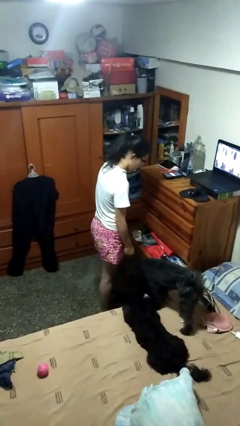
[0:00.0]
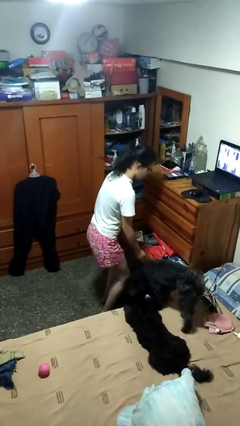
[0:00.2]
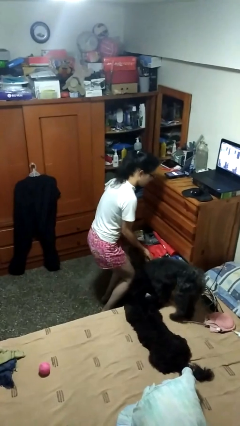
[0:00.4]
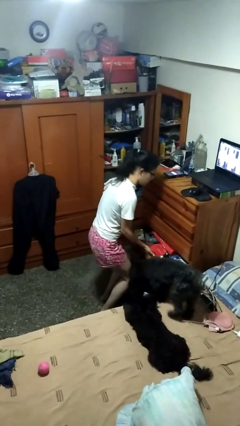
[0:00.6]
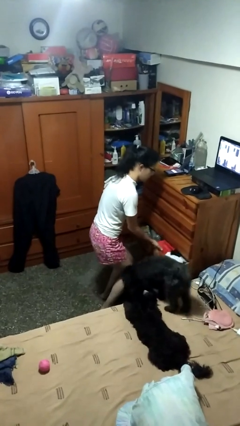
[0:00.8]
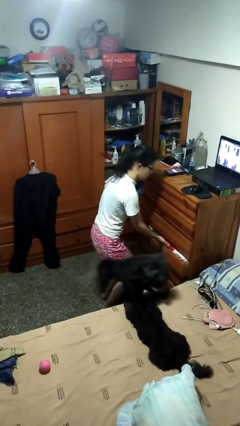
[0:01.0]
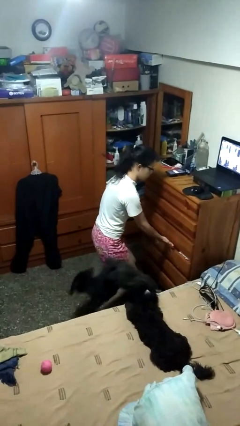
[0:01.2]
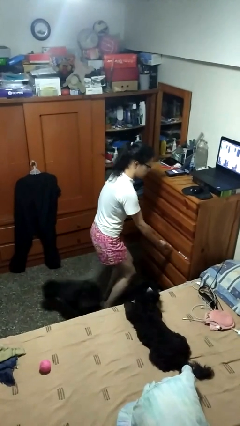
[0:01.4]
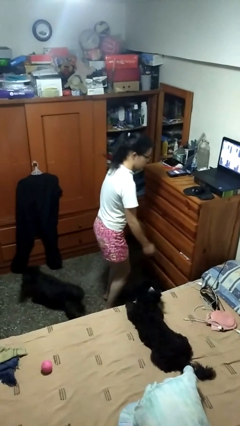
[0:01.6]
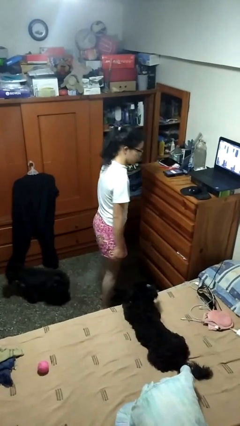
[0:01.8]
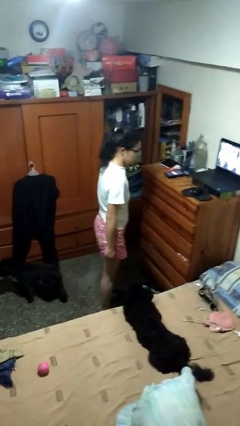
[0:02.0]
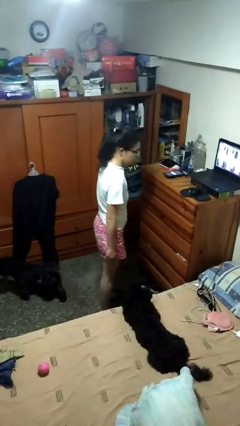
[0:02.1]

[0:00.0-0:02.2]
person closes dresser drawer

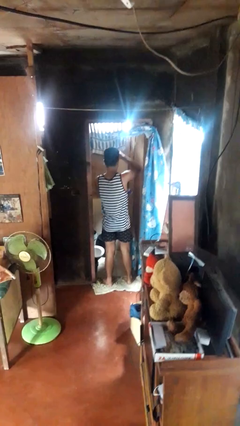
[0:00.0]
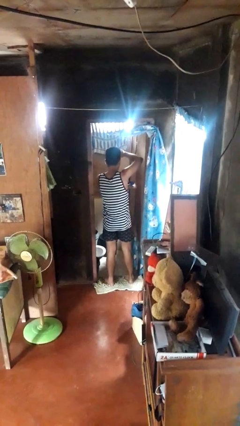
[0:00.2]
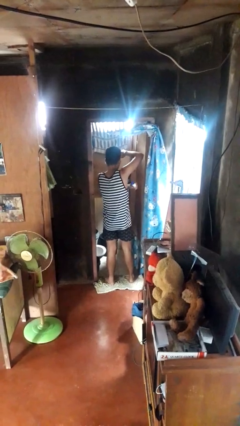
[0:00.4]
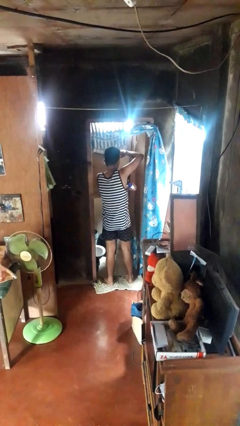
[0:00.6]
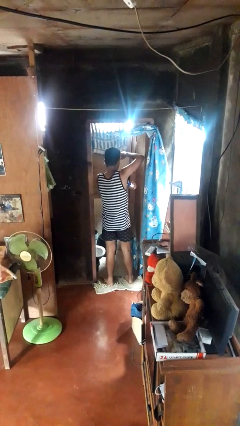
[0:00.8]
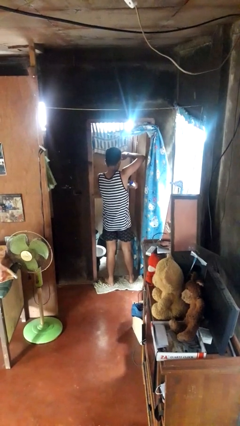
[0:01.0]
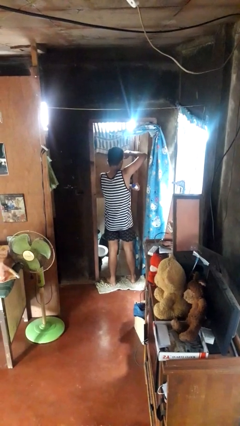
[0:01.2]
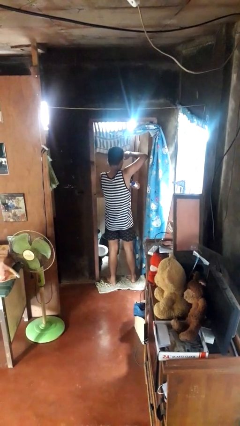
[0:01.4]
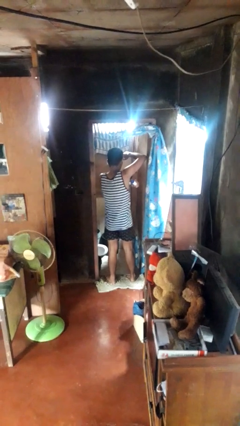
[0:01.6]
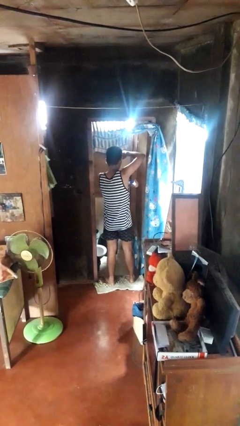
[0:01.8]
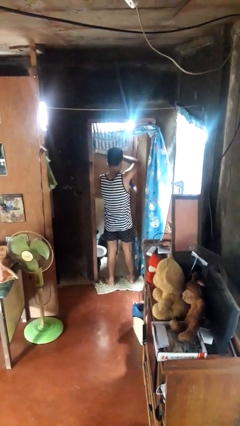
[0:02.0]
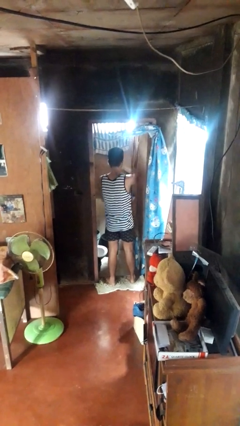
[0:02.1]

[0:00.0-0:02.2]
person applies deodorant

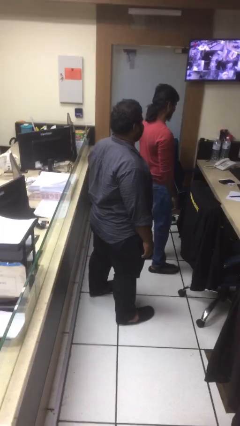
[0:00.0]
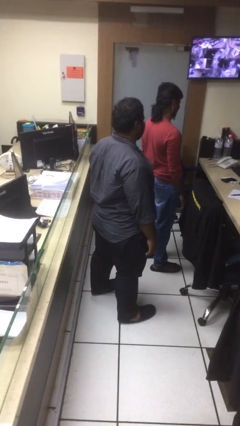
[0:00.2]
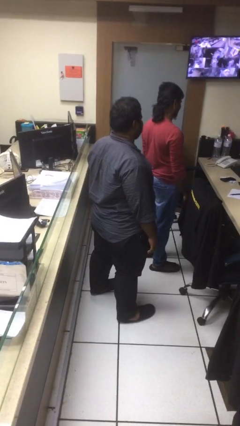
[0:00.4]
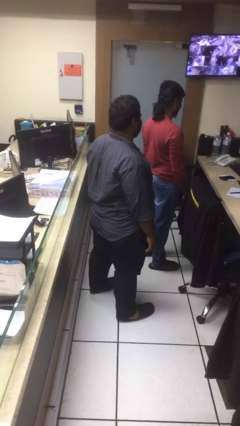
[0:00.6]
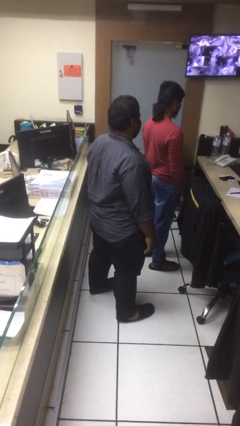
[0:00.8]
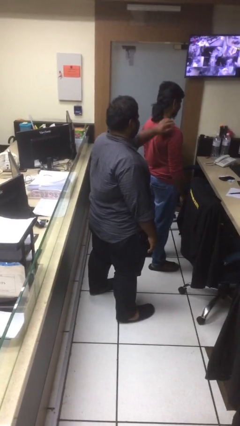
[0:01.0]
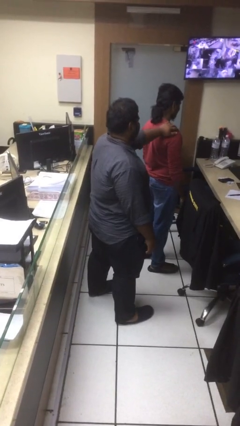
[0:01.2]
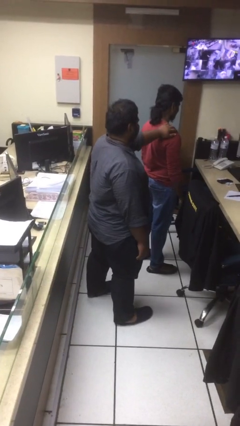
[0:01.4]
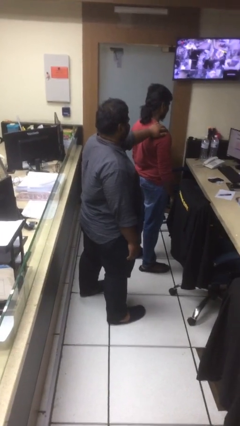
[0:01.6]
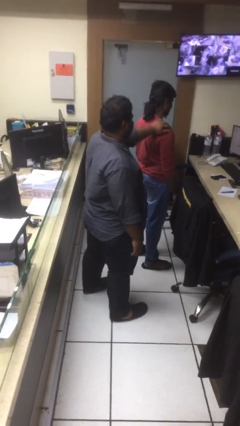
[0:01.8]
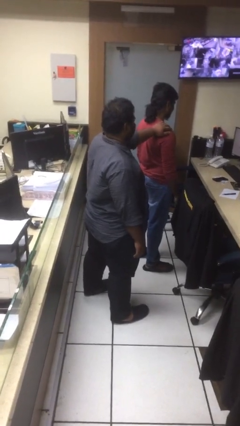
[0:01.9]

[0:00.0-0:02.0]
person grabs person by shoulder

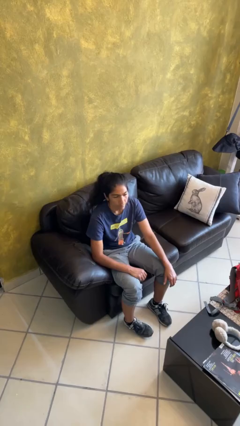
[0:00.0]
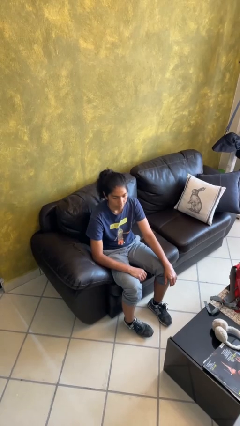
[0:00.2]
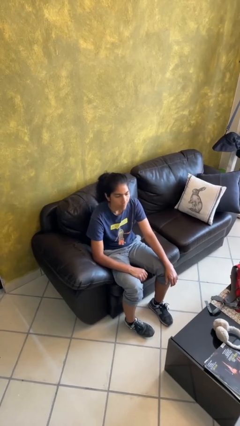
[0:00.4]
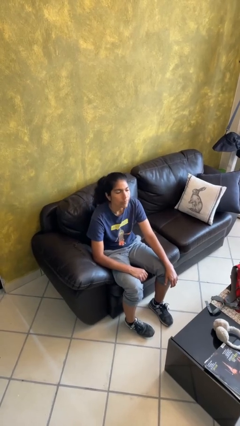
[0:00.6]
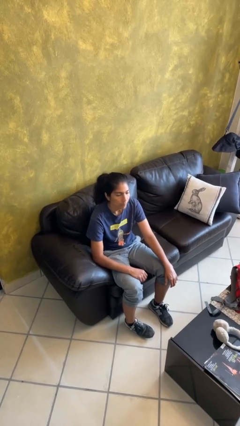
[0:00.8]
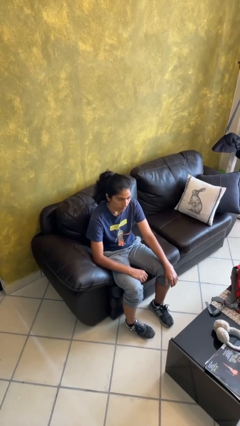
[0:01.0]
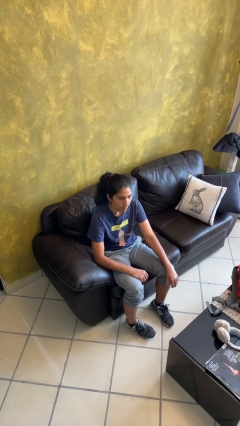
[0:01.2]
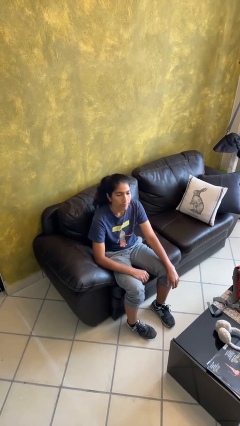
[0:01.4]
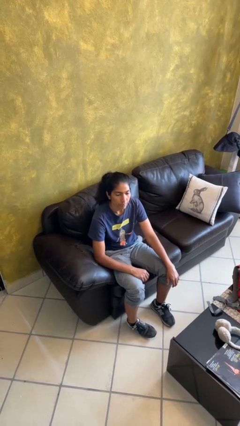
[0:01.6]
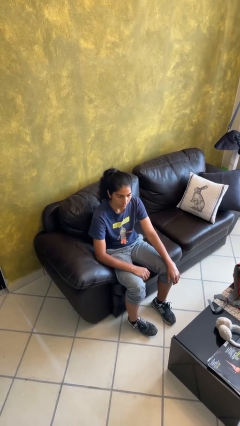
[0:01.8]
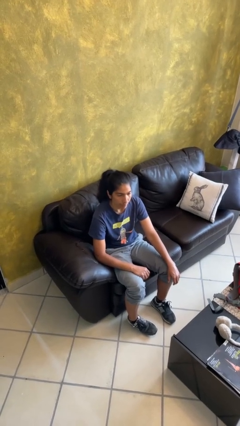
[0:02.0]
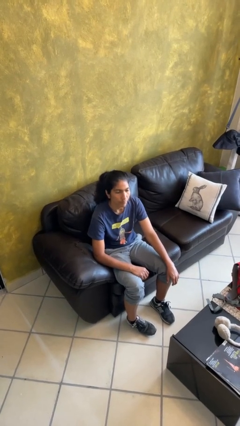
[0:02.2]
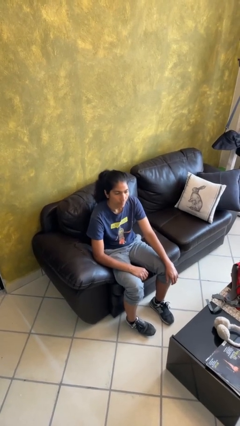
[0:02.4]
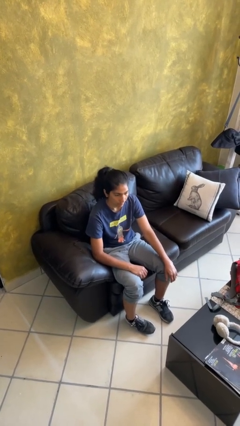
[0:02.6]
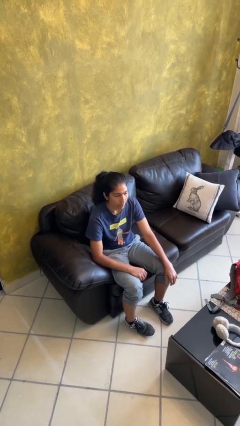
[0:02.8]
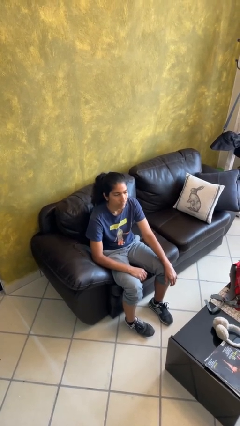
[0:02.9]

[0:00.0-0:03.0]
person nods head

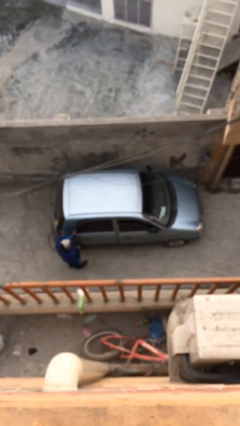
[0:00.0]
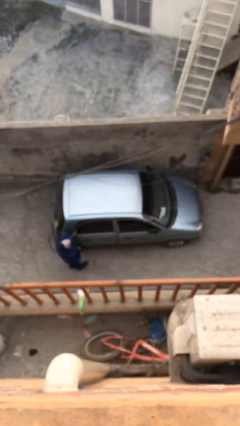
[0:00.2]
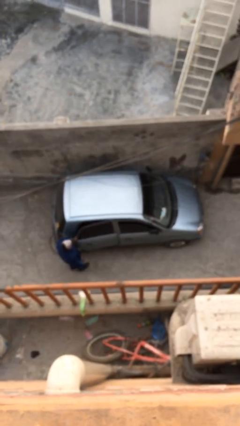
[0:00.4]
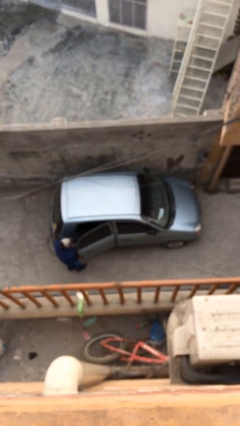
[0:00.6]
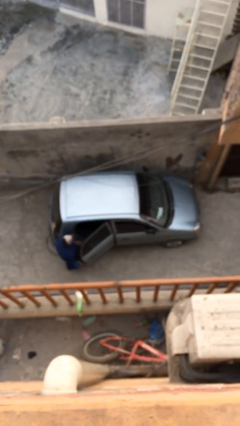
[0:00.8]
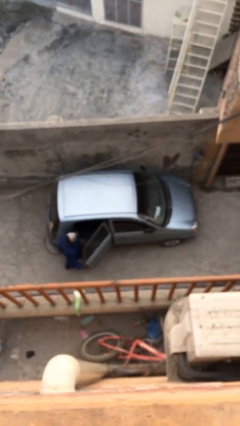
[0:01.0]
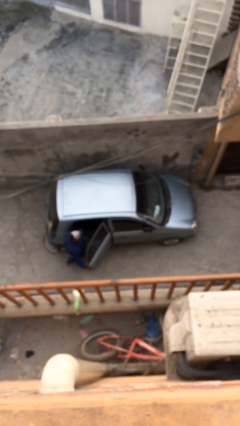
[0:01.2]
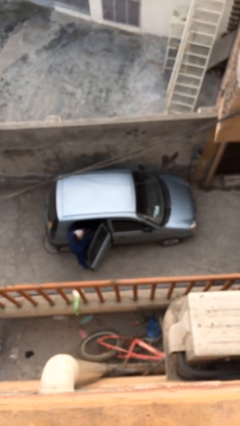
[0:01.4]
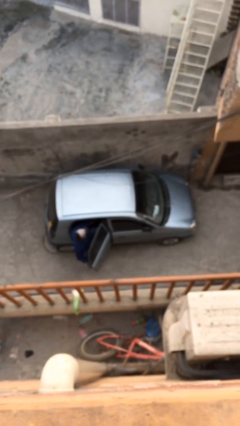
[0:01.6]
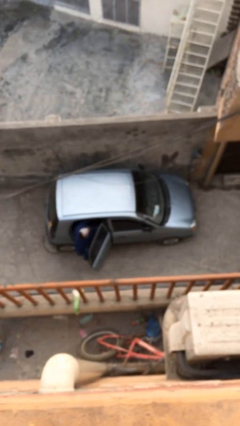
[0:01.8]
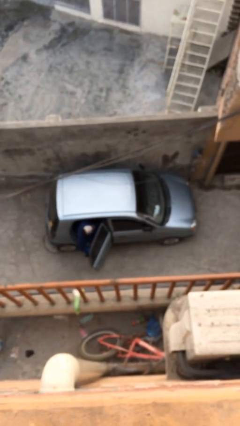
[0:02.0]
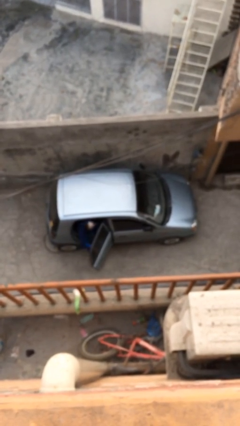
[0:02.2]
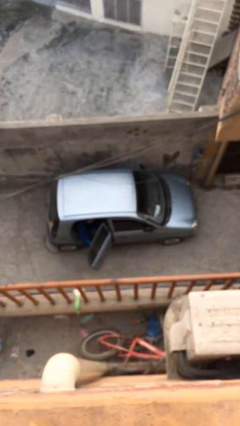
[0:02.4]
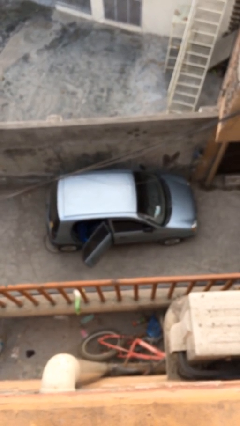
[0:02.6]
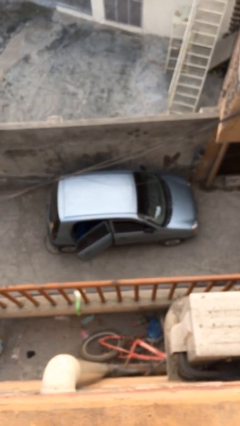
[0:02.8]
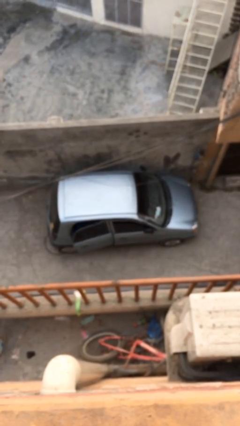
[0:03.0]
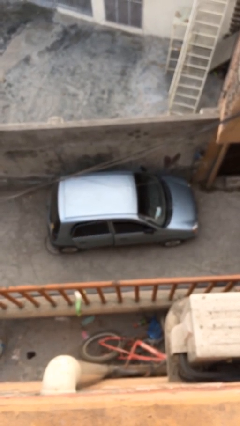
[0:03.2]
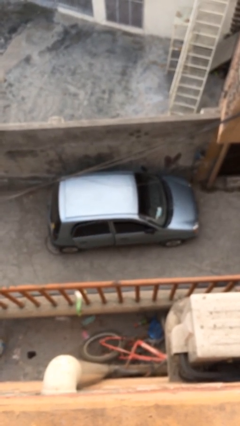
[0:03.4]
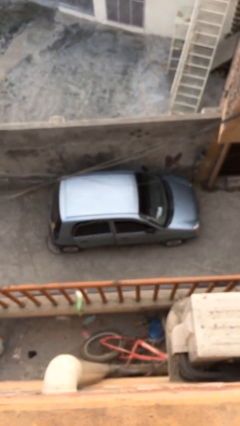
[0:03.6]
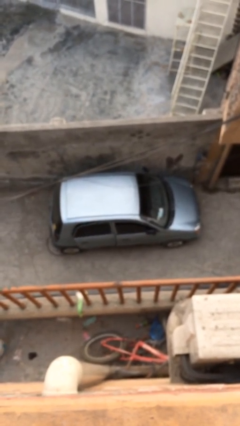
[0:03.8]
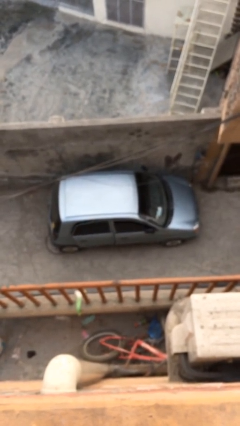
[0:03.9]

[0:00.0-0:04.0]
car picks up person

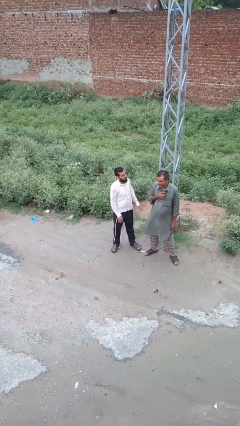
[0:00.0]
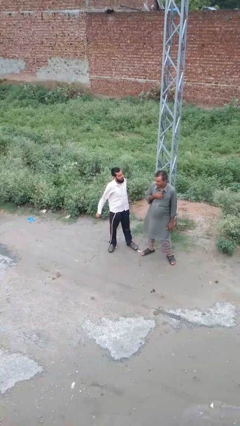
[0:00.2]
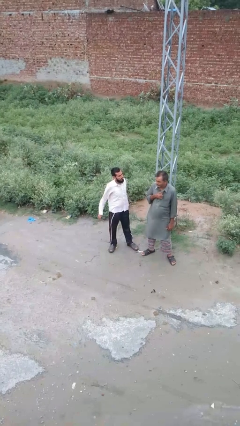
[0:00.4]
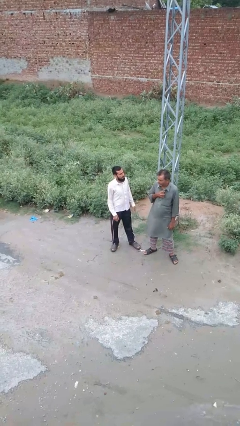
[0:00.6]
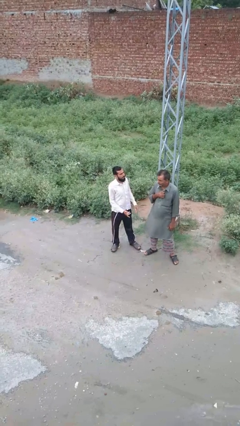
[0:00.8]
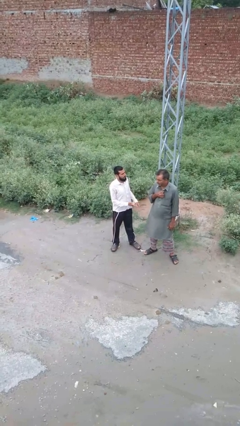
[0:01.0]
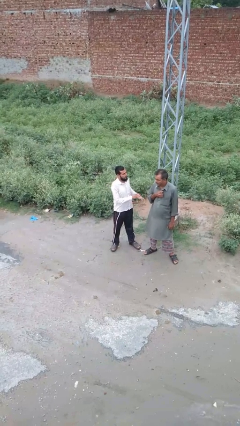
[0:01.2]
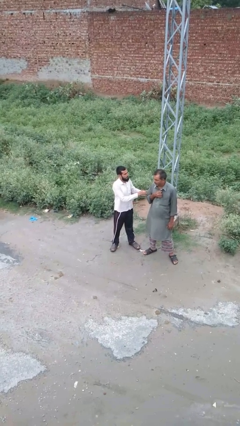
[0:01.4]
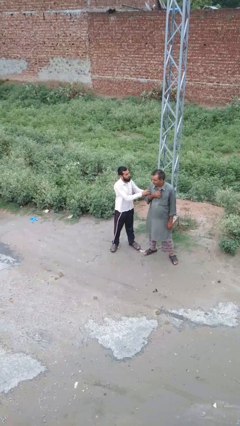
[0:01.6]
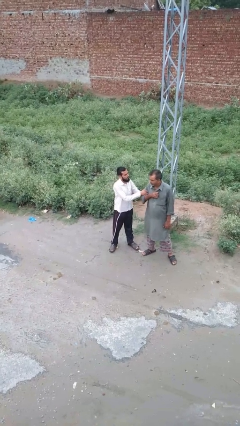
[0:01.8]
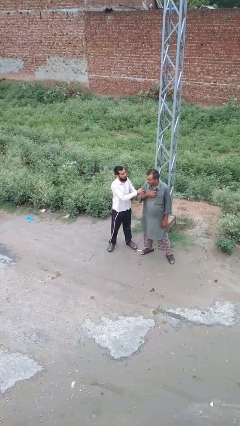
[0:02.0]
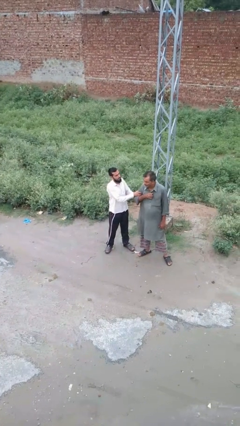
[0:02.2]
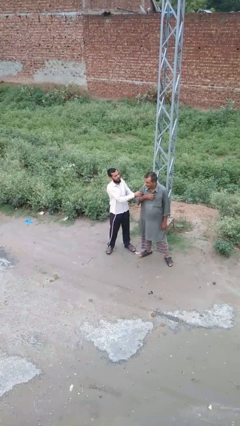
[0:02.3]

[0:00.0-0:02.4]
person grabs person by bicep

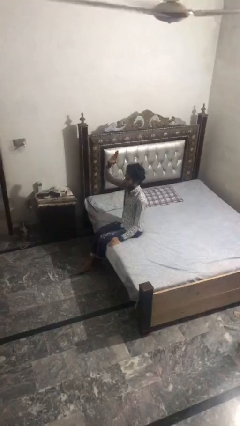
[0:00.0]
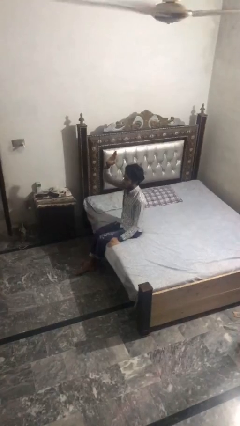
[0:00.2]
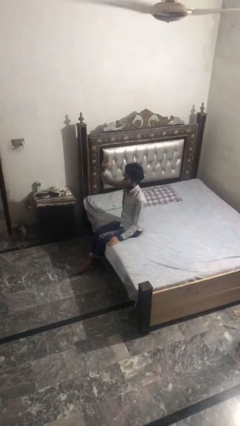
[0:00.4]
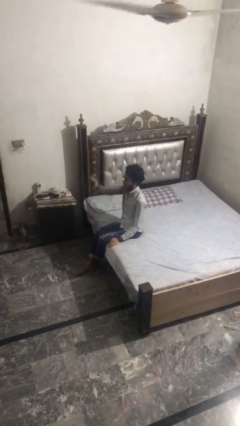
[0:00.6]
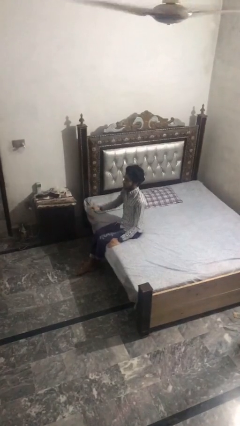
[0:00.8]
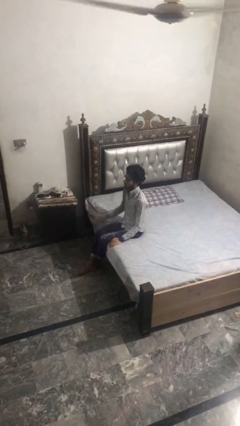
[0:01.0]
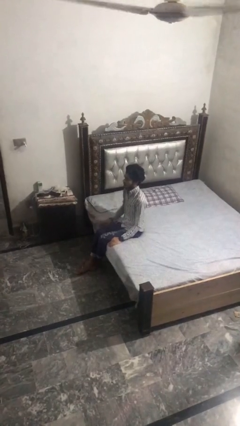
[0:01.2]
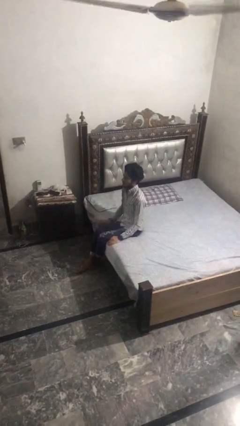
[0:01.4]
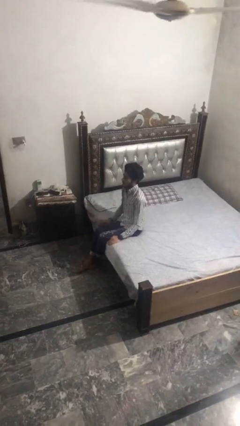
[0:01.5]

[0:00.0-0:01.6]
person gestures lower hand
